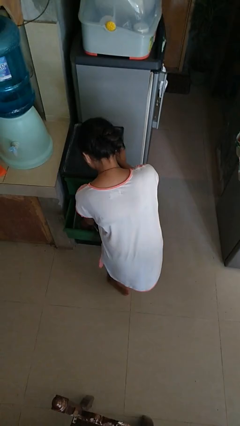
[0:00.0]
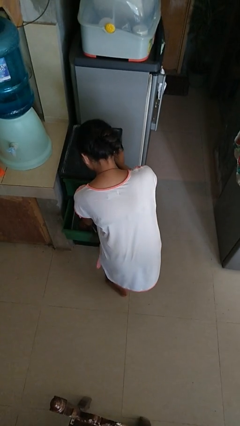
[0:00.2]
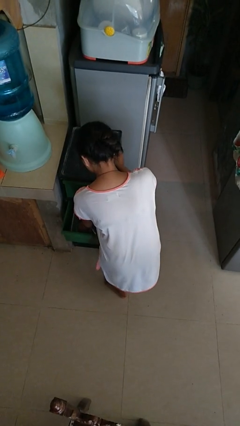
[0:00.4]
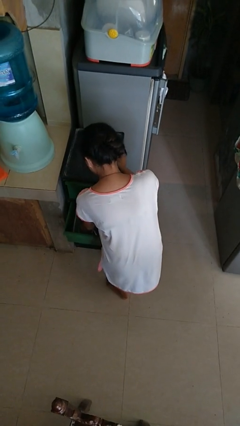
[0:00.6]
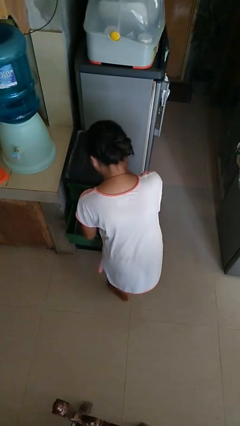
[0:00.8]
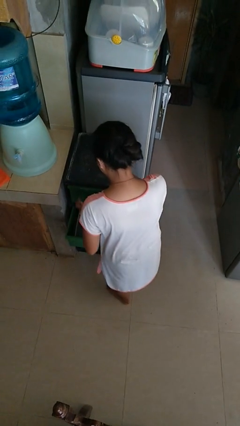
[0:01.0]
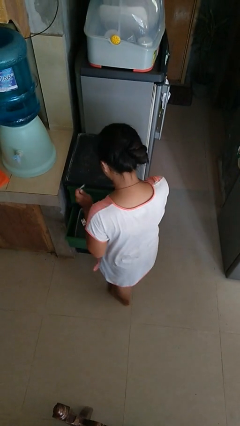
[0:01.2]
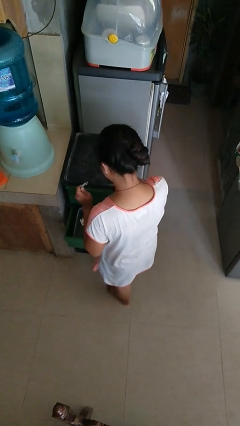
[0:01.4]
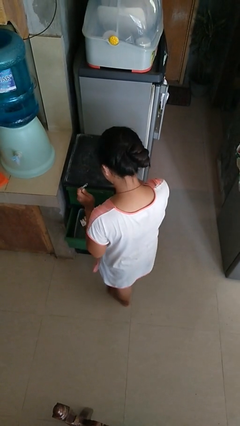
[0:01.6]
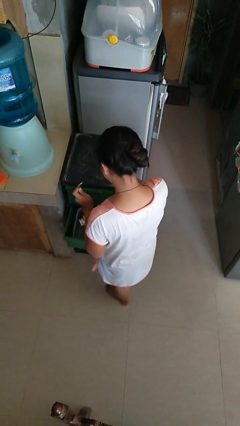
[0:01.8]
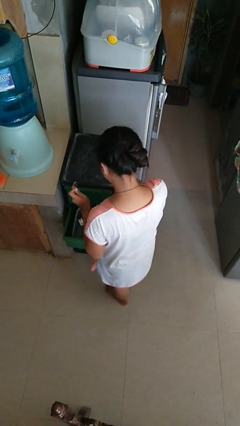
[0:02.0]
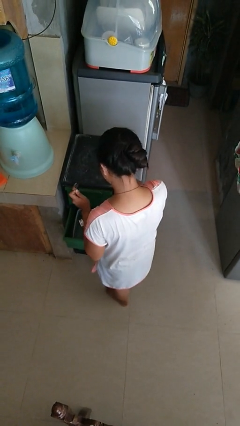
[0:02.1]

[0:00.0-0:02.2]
person takes object from kitchen drawer

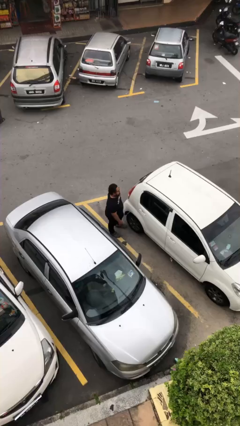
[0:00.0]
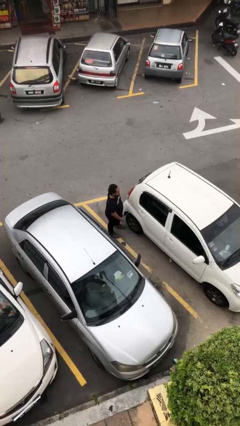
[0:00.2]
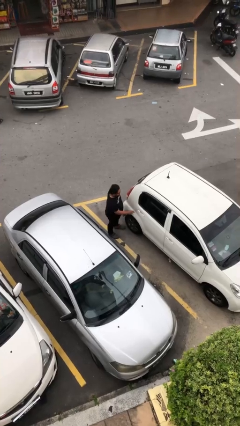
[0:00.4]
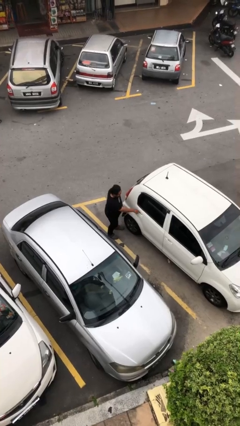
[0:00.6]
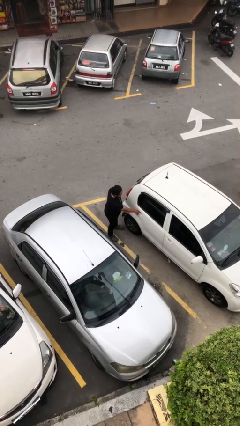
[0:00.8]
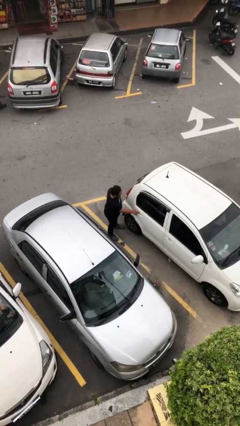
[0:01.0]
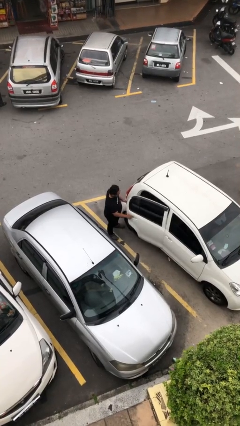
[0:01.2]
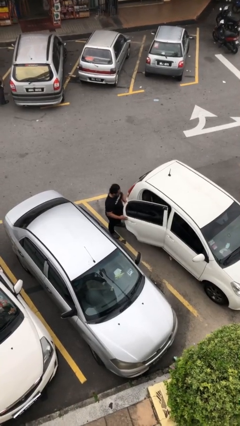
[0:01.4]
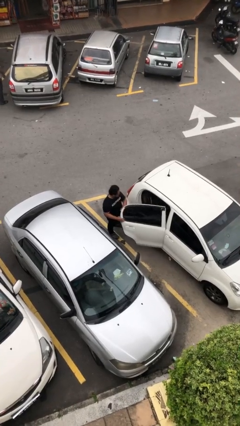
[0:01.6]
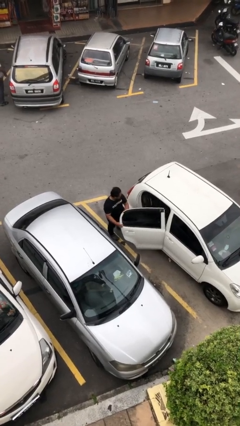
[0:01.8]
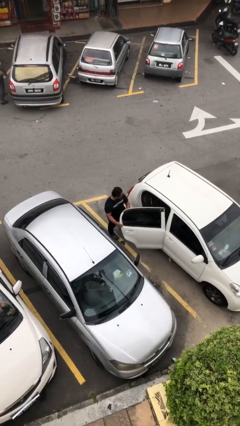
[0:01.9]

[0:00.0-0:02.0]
person opens car door

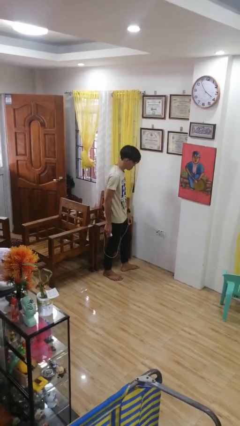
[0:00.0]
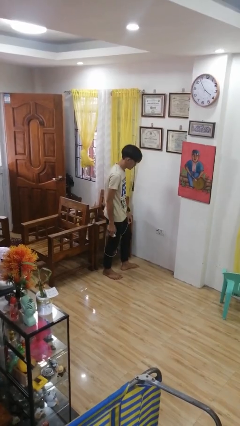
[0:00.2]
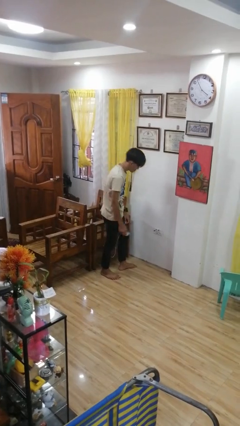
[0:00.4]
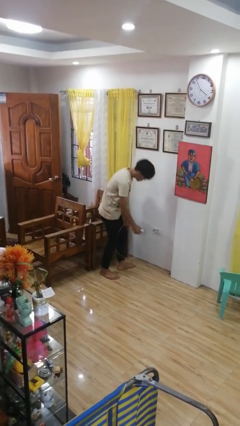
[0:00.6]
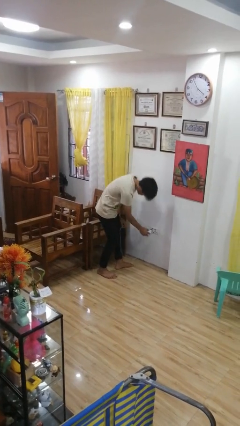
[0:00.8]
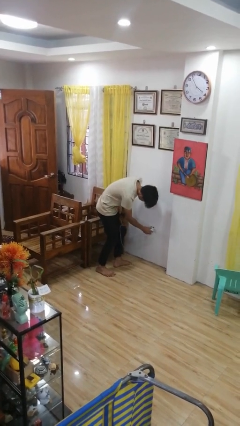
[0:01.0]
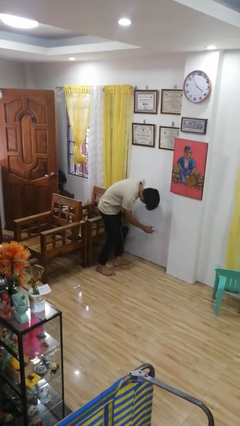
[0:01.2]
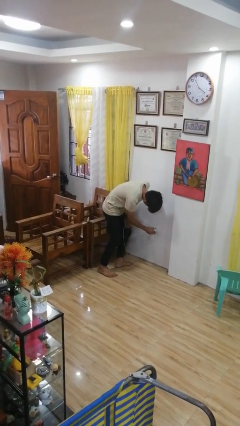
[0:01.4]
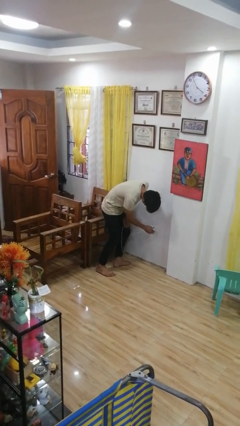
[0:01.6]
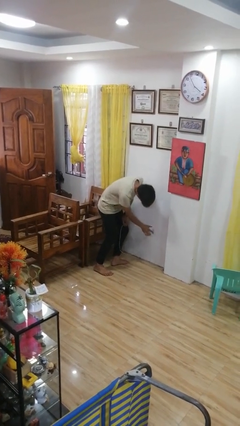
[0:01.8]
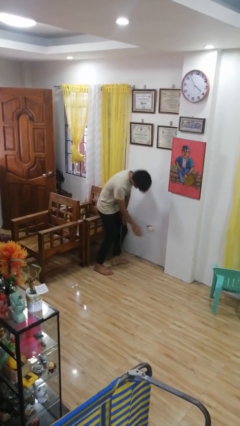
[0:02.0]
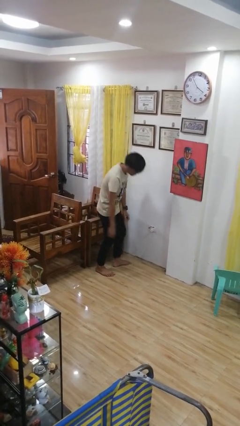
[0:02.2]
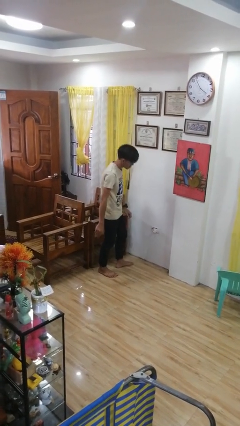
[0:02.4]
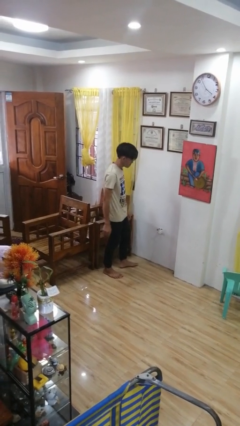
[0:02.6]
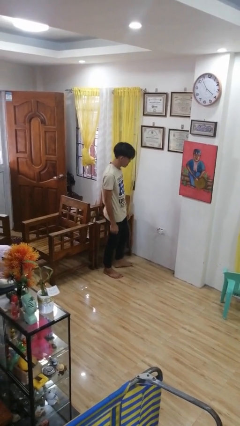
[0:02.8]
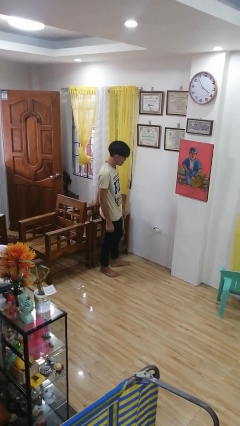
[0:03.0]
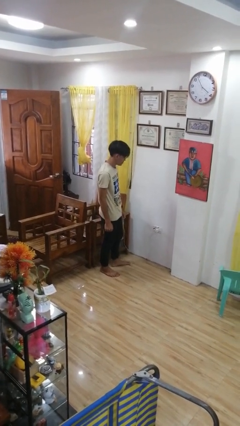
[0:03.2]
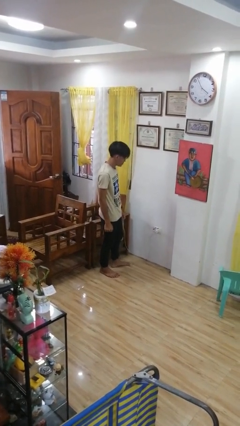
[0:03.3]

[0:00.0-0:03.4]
person plugs into electrical socket

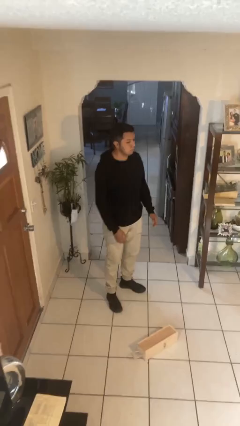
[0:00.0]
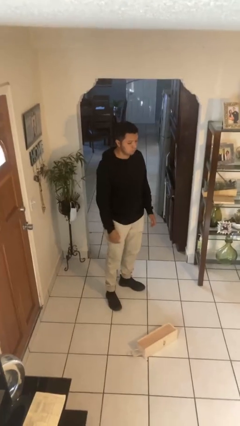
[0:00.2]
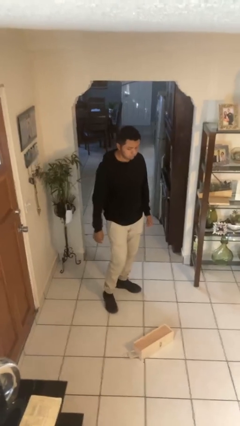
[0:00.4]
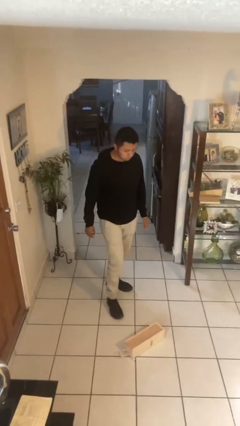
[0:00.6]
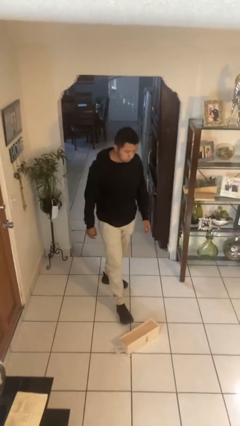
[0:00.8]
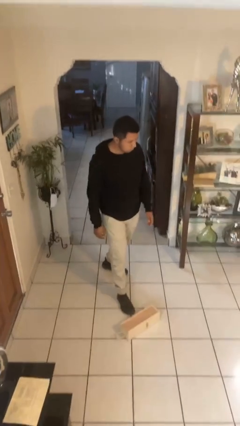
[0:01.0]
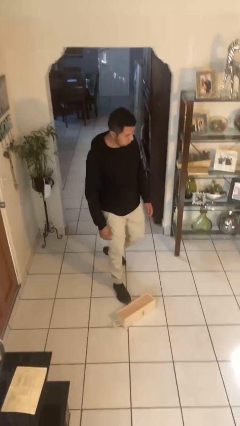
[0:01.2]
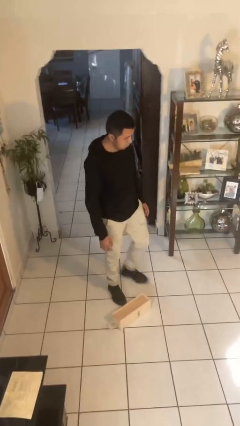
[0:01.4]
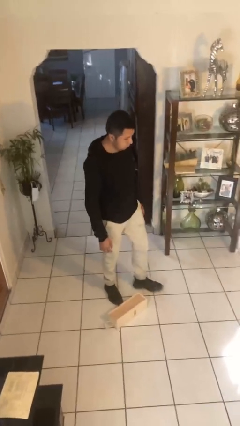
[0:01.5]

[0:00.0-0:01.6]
person trips on object on floor

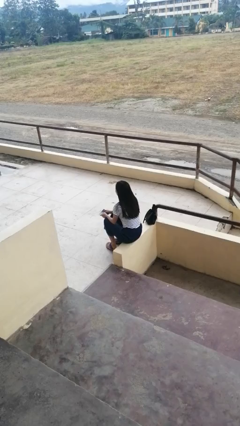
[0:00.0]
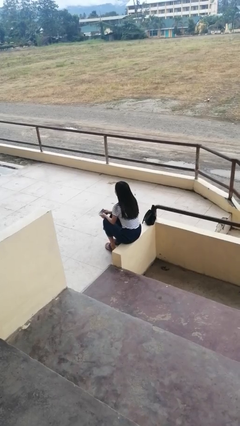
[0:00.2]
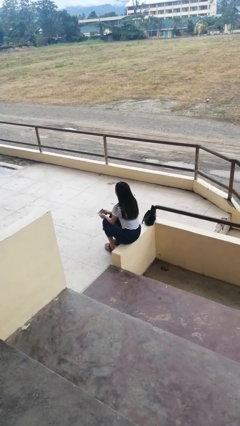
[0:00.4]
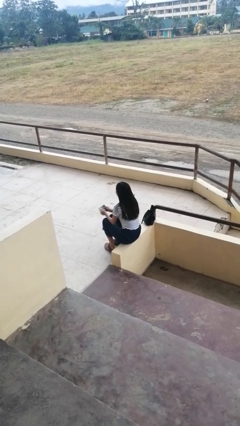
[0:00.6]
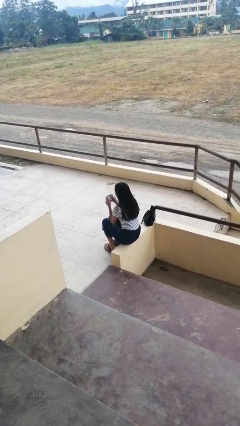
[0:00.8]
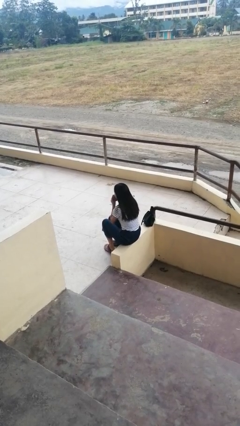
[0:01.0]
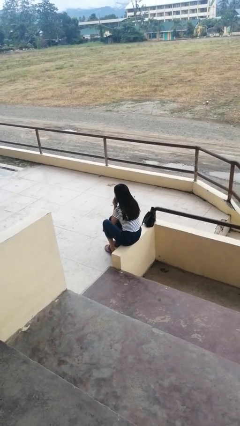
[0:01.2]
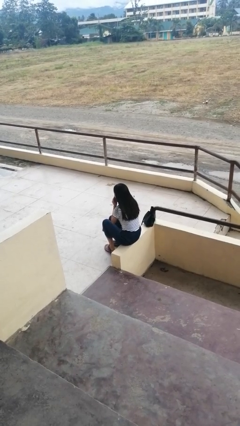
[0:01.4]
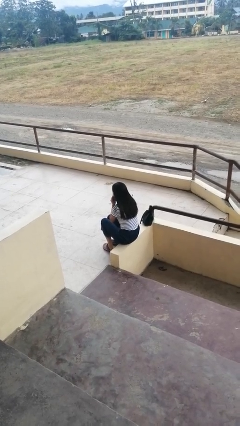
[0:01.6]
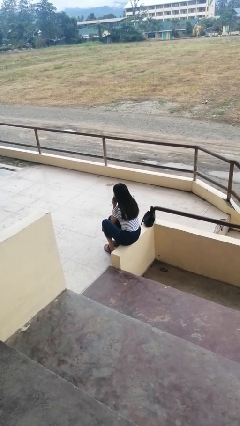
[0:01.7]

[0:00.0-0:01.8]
person blows nose

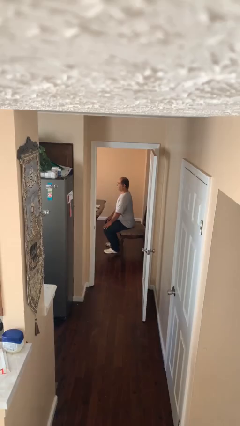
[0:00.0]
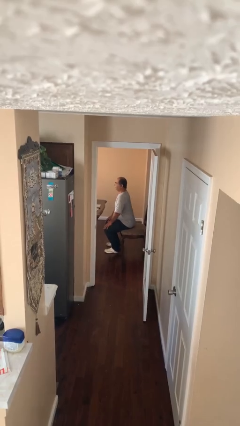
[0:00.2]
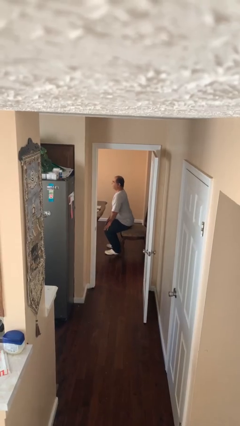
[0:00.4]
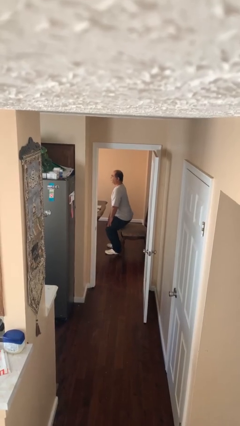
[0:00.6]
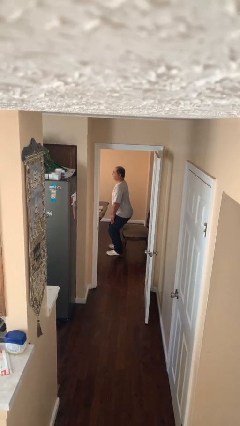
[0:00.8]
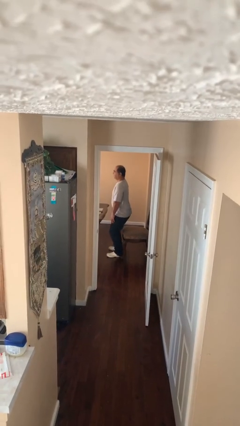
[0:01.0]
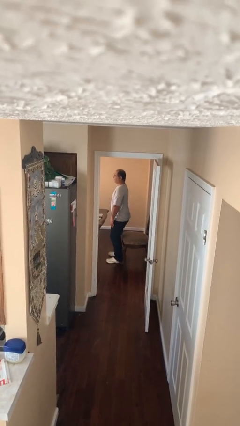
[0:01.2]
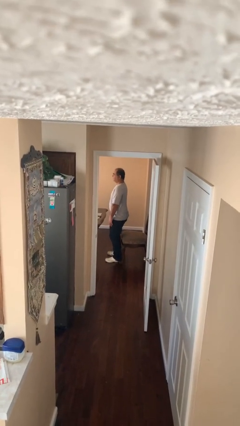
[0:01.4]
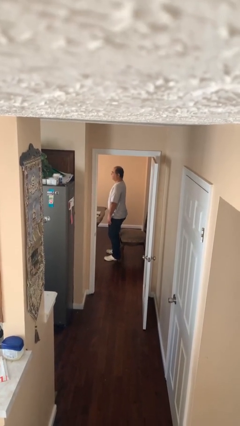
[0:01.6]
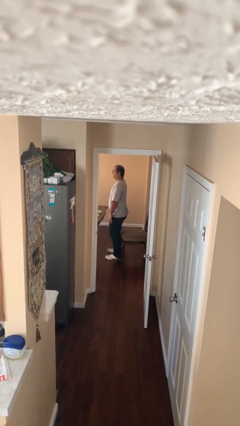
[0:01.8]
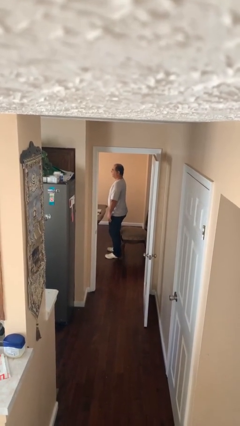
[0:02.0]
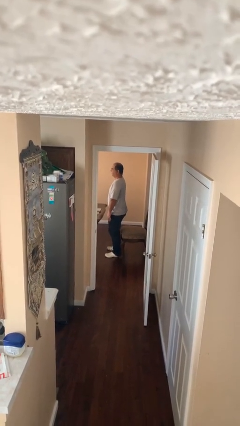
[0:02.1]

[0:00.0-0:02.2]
person stands up

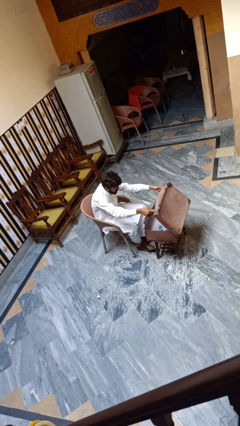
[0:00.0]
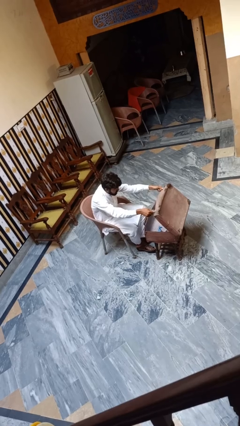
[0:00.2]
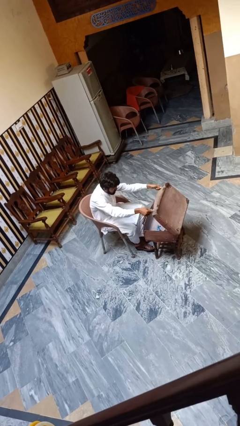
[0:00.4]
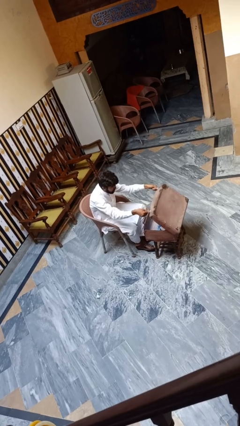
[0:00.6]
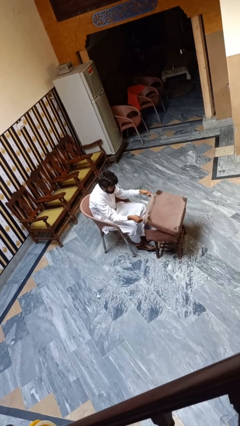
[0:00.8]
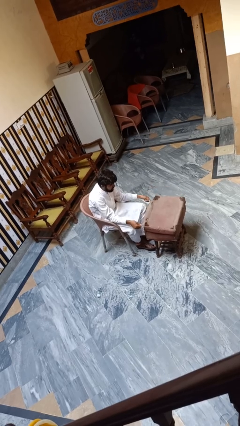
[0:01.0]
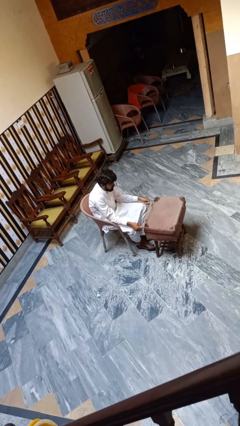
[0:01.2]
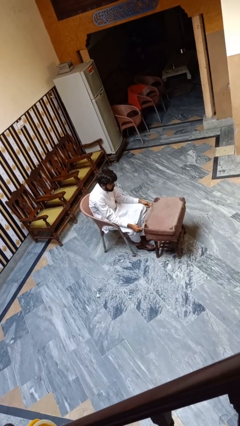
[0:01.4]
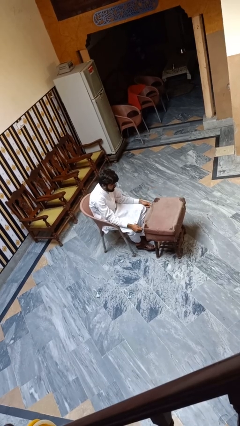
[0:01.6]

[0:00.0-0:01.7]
person closes suitcase

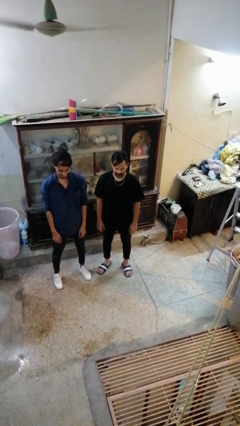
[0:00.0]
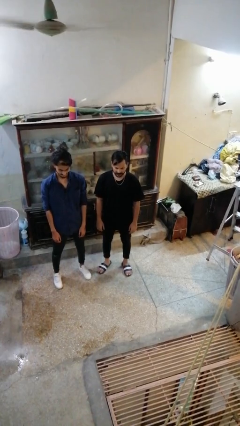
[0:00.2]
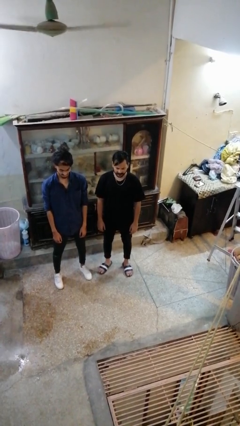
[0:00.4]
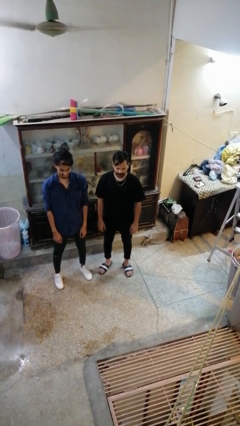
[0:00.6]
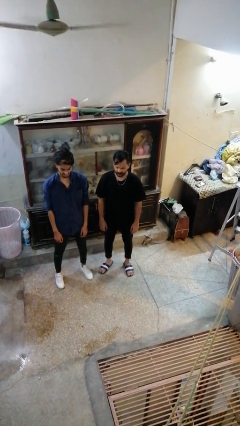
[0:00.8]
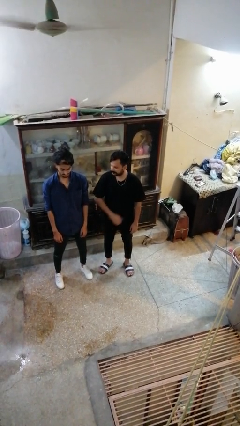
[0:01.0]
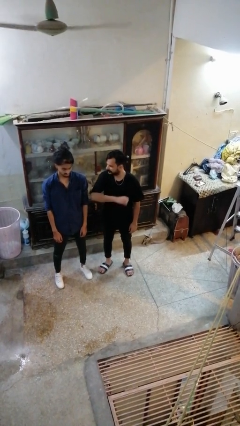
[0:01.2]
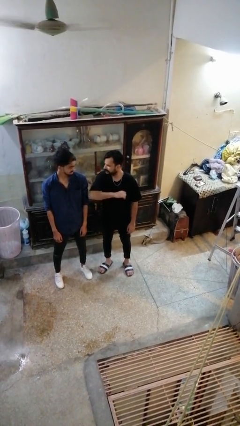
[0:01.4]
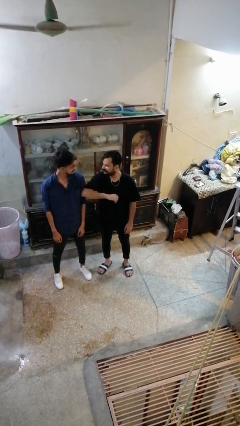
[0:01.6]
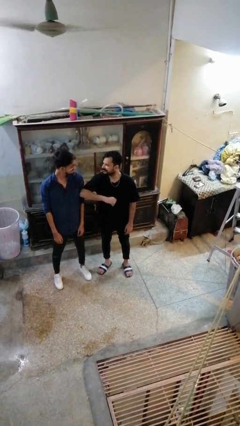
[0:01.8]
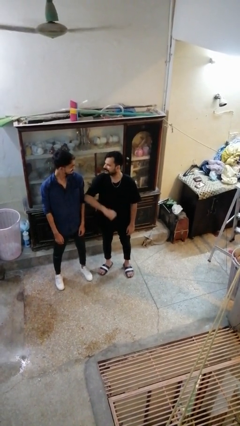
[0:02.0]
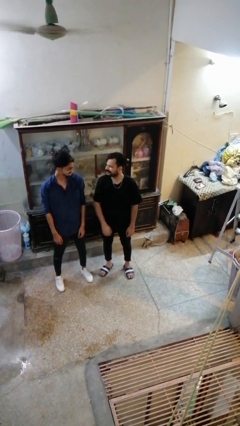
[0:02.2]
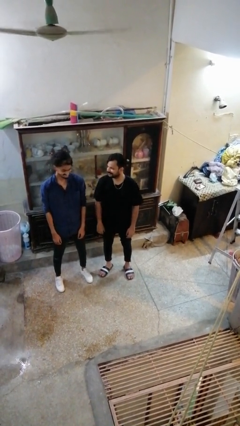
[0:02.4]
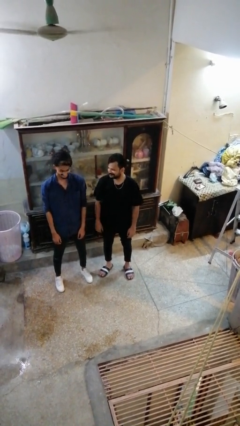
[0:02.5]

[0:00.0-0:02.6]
person nudges person with elbow
